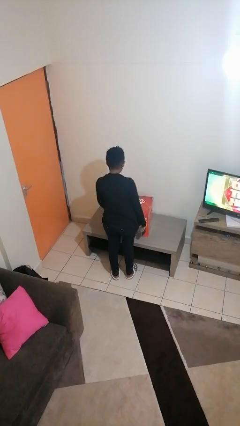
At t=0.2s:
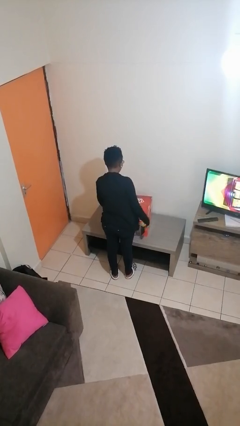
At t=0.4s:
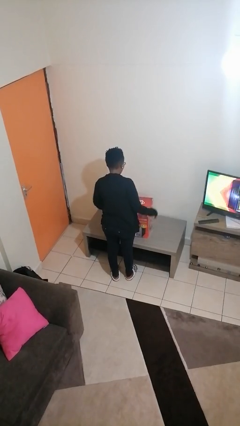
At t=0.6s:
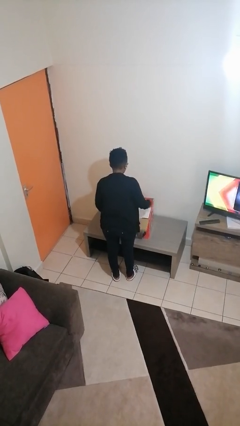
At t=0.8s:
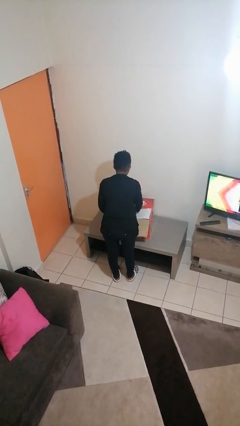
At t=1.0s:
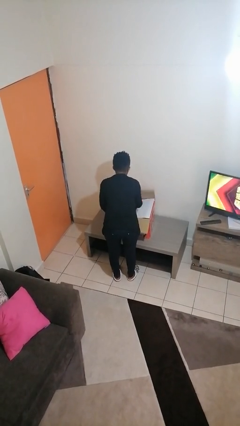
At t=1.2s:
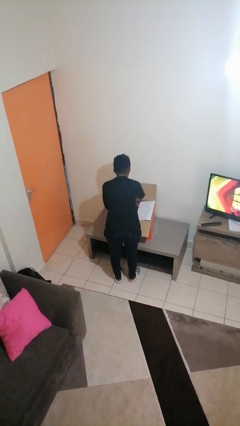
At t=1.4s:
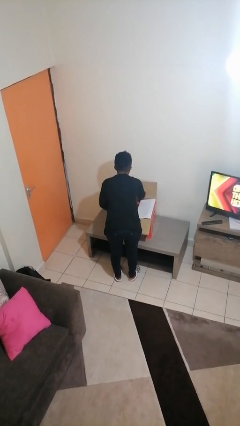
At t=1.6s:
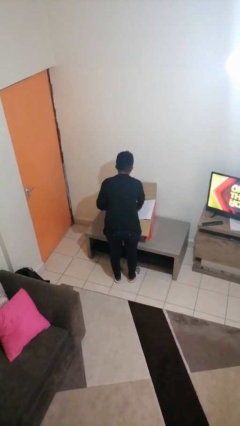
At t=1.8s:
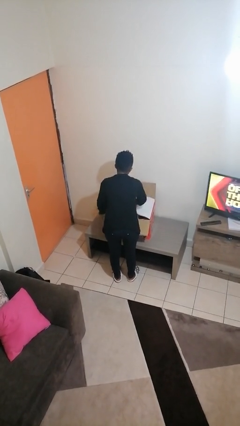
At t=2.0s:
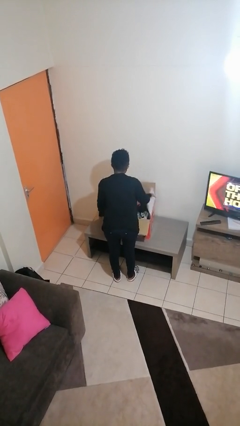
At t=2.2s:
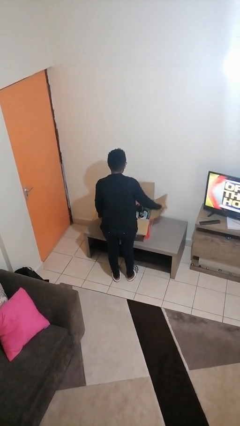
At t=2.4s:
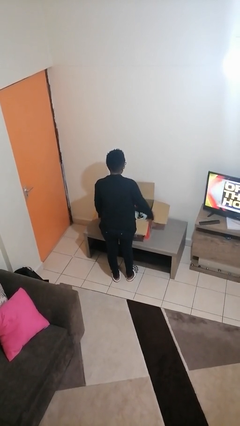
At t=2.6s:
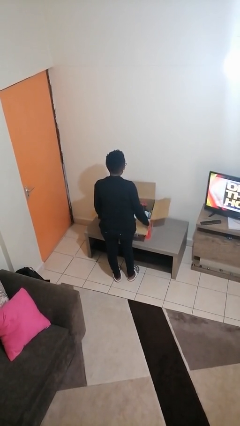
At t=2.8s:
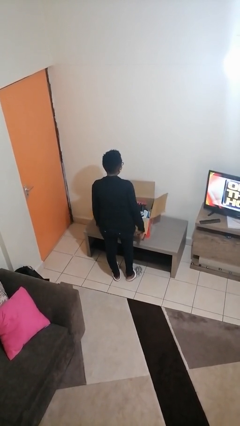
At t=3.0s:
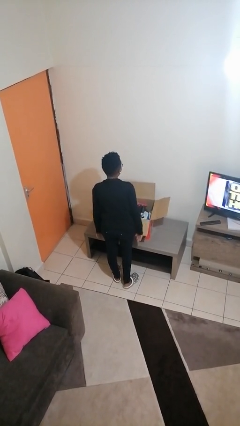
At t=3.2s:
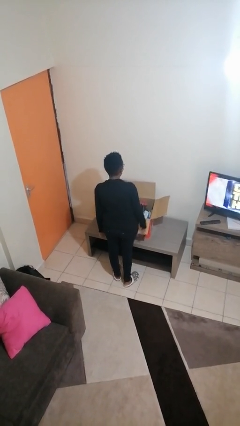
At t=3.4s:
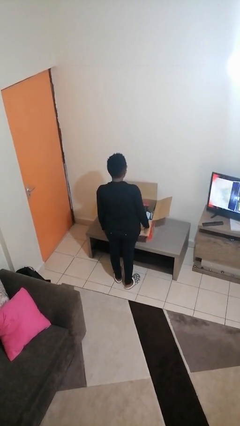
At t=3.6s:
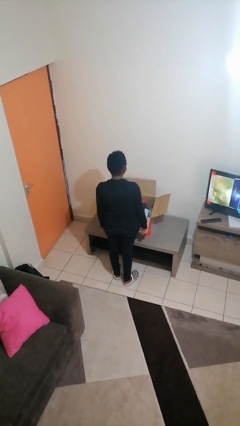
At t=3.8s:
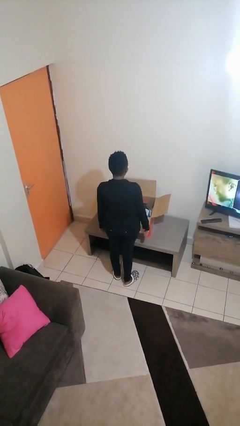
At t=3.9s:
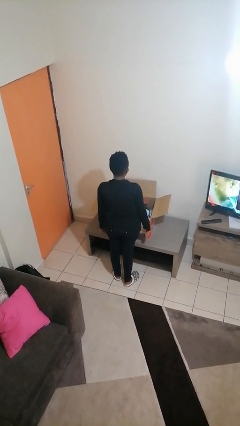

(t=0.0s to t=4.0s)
person opens box

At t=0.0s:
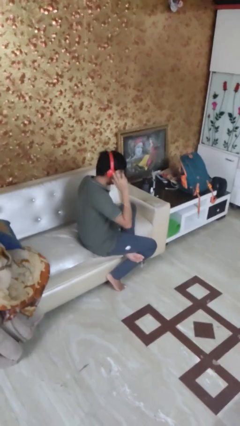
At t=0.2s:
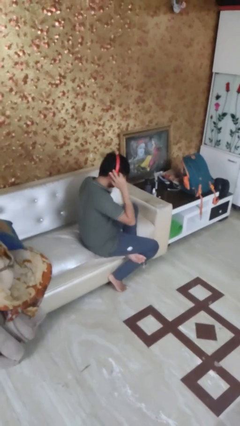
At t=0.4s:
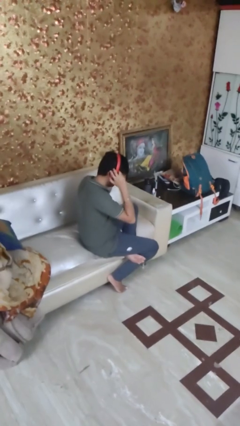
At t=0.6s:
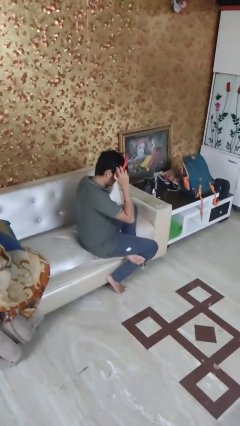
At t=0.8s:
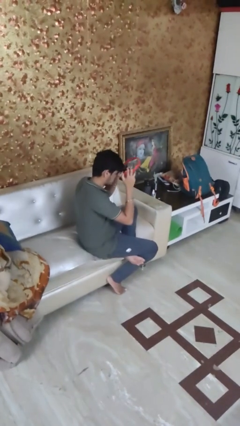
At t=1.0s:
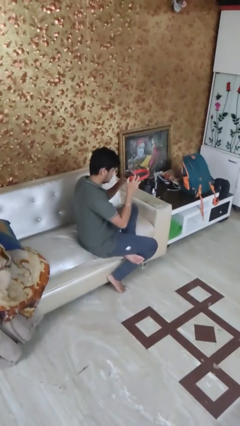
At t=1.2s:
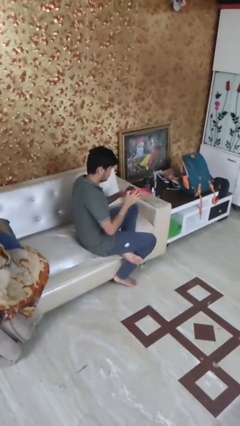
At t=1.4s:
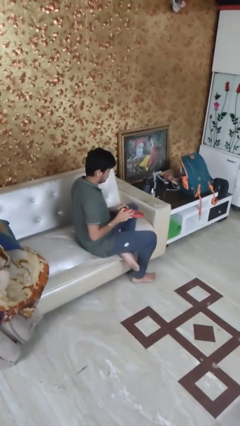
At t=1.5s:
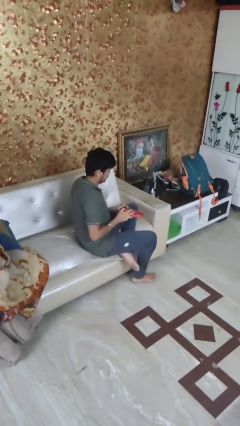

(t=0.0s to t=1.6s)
person takes off headphones

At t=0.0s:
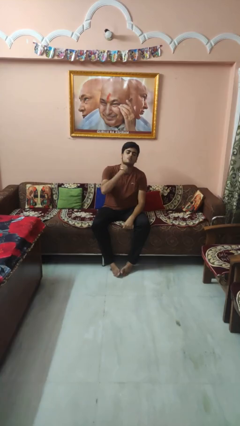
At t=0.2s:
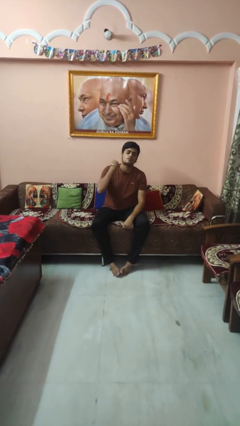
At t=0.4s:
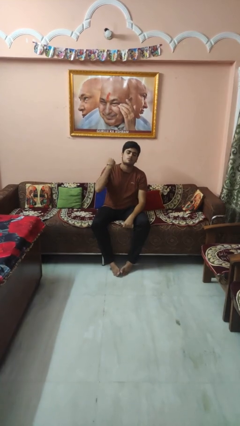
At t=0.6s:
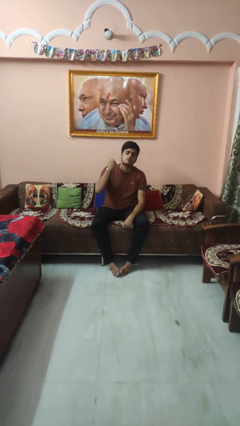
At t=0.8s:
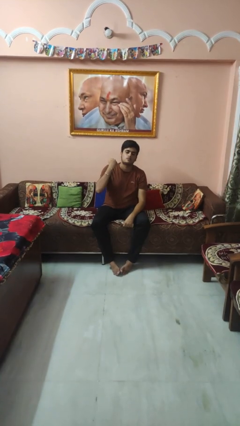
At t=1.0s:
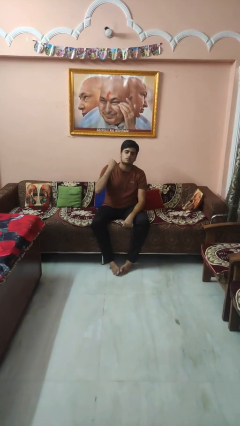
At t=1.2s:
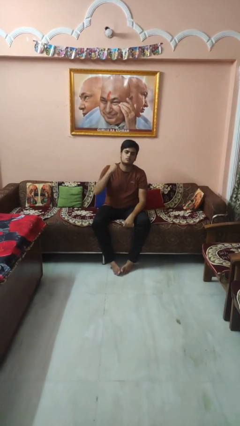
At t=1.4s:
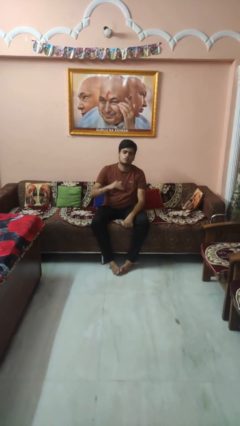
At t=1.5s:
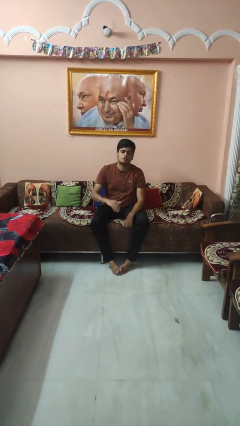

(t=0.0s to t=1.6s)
person gestures cut

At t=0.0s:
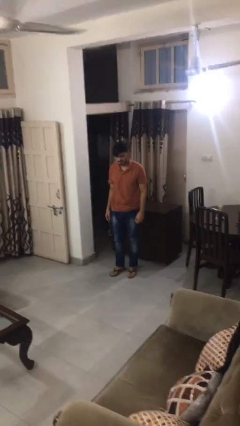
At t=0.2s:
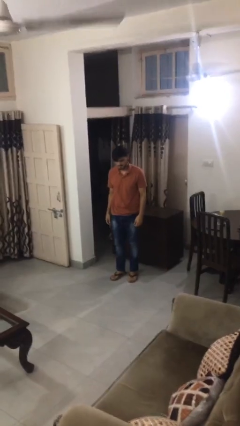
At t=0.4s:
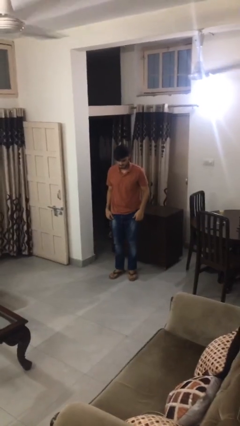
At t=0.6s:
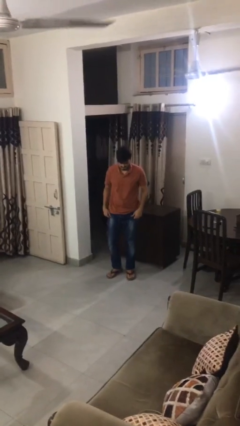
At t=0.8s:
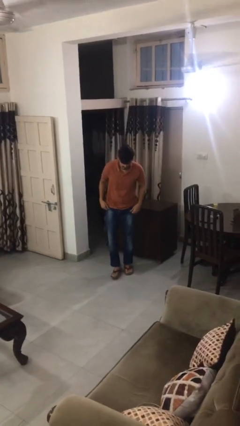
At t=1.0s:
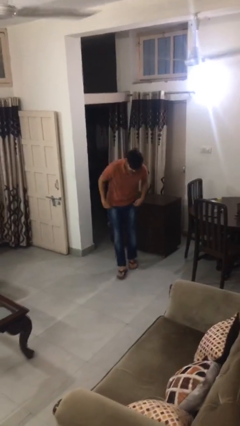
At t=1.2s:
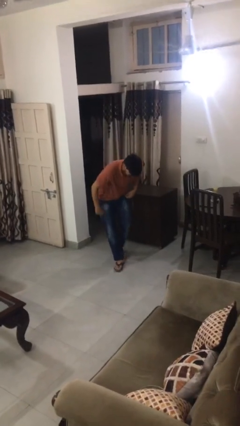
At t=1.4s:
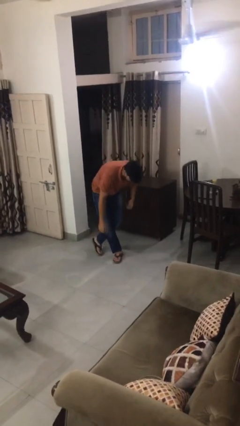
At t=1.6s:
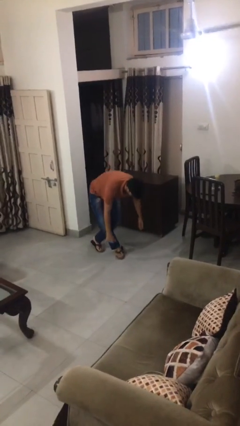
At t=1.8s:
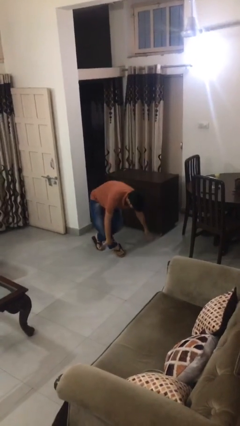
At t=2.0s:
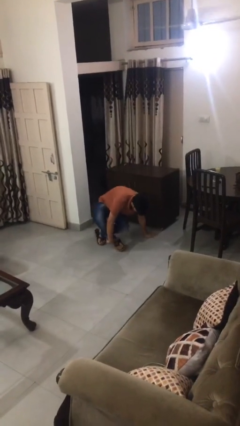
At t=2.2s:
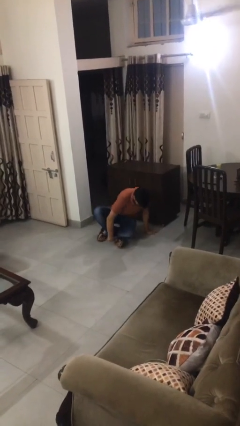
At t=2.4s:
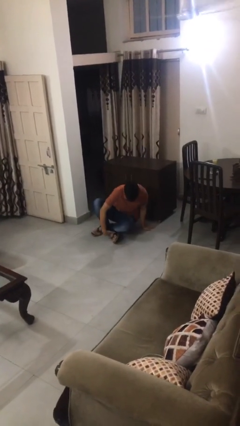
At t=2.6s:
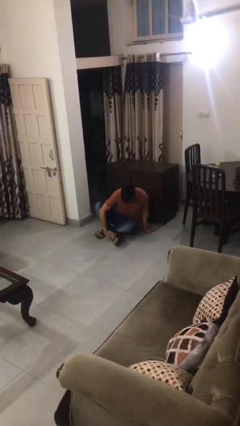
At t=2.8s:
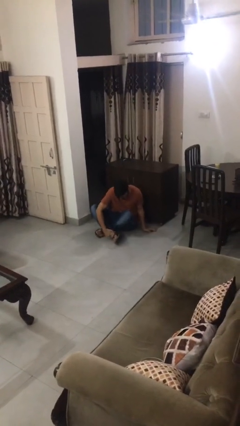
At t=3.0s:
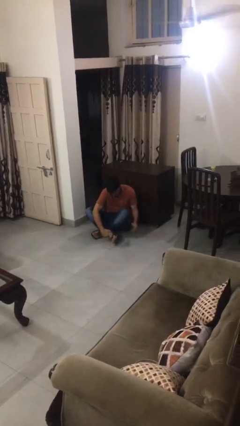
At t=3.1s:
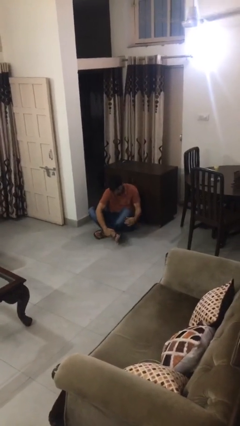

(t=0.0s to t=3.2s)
person sits crisscross

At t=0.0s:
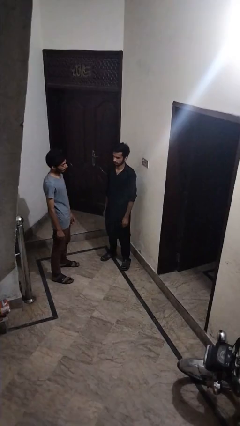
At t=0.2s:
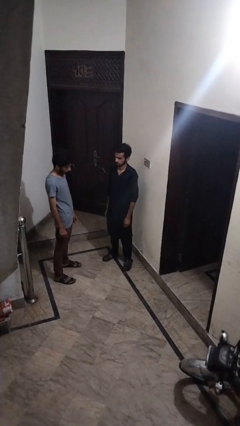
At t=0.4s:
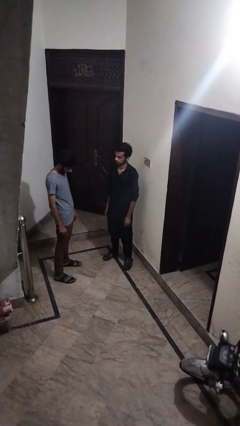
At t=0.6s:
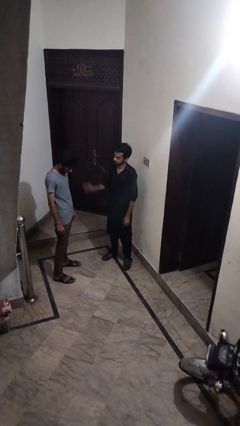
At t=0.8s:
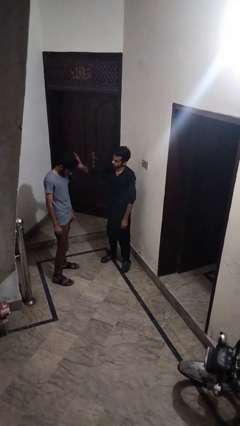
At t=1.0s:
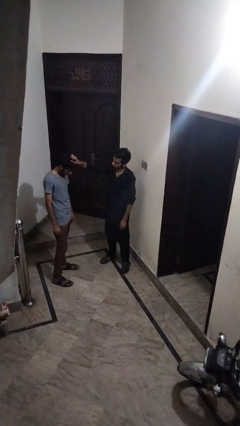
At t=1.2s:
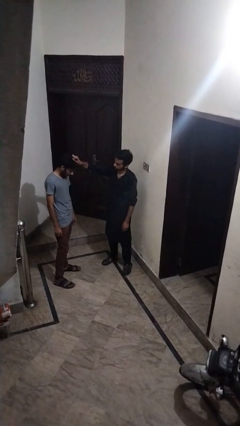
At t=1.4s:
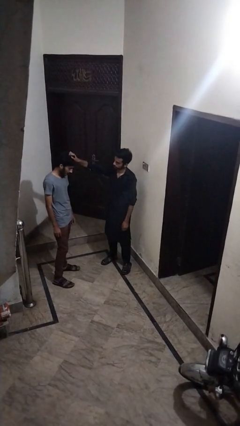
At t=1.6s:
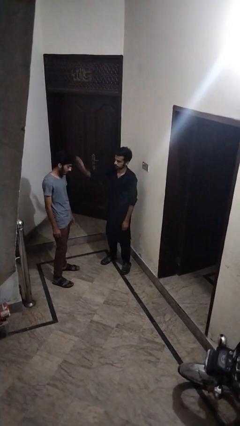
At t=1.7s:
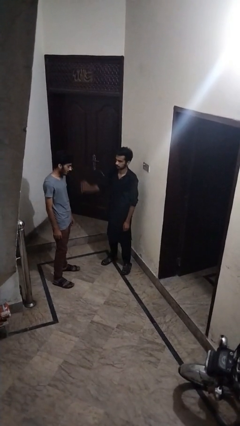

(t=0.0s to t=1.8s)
person grabs person by hair

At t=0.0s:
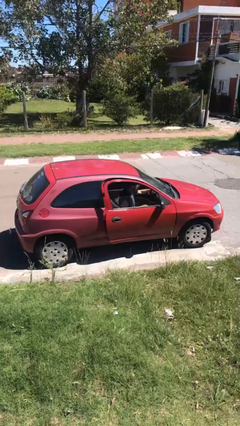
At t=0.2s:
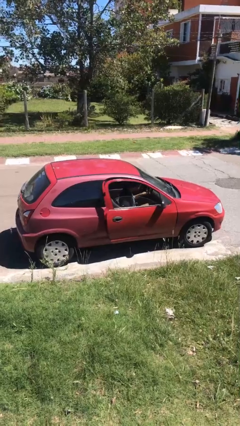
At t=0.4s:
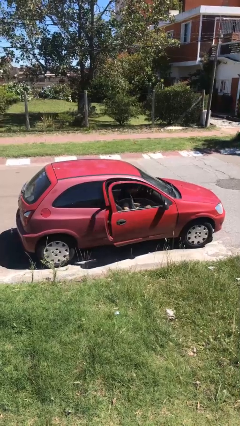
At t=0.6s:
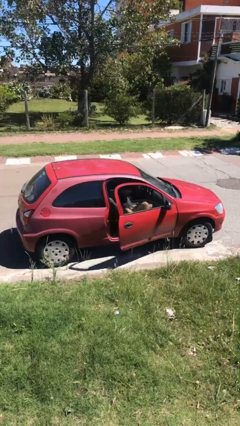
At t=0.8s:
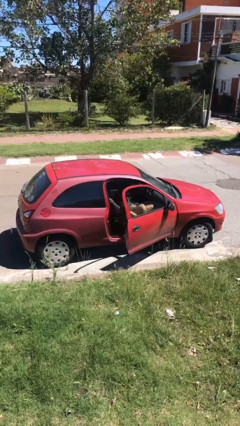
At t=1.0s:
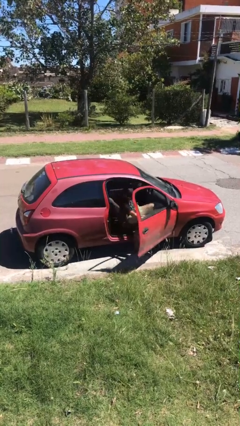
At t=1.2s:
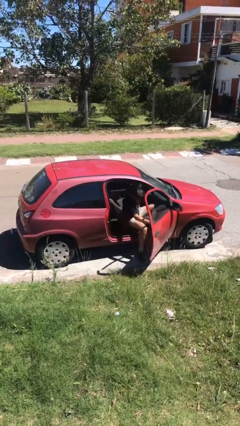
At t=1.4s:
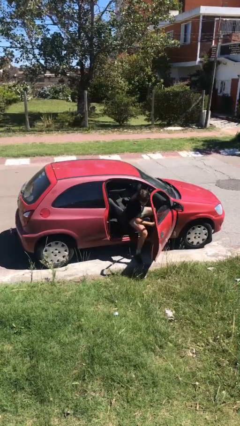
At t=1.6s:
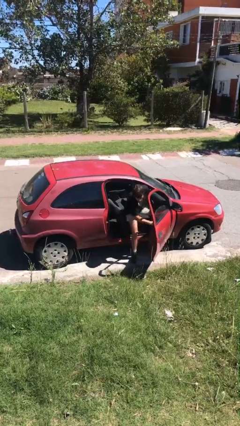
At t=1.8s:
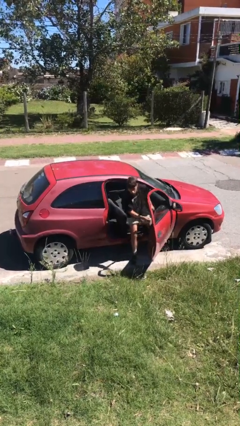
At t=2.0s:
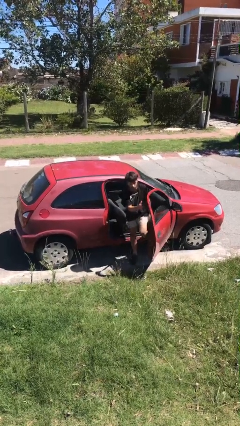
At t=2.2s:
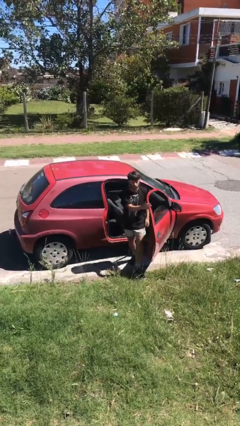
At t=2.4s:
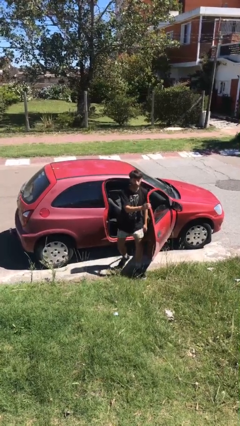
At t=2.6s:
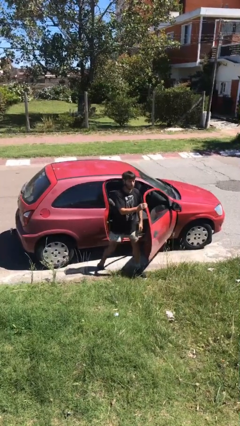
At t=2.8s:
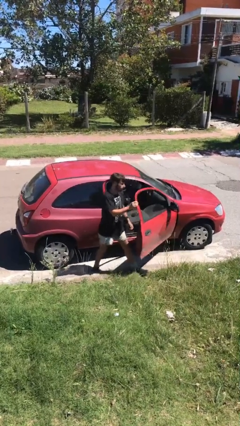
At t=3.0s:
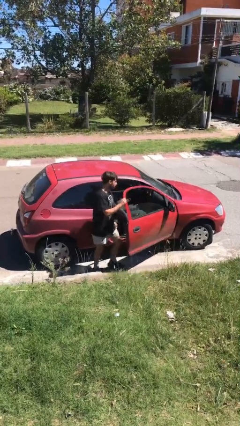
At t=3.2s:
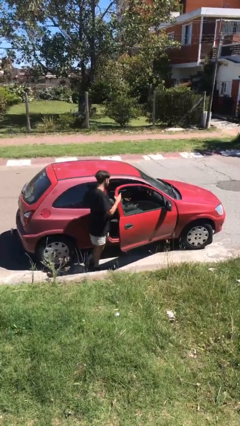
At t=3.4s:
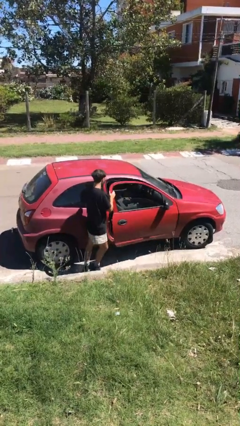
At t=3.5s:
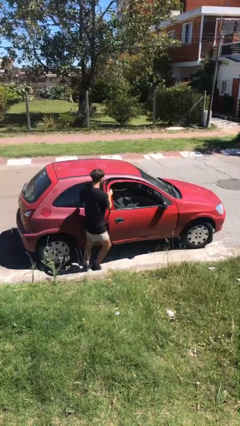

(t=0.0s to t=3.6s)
car drops off person

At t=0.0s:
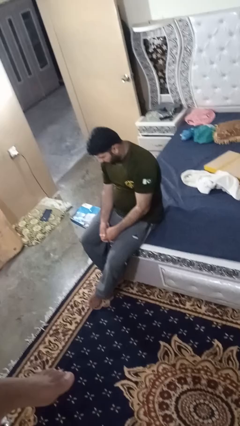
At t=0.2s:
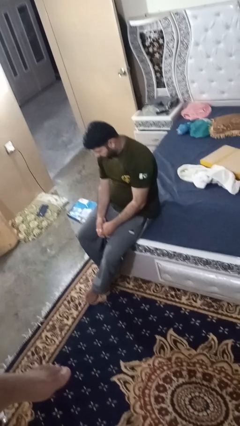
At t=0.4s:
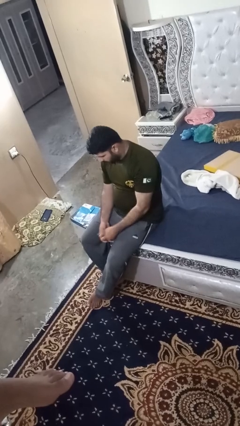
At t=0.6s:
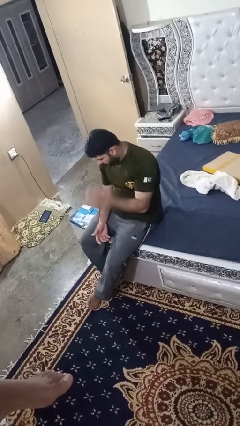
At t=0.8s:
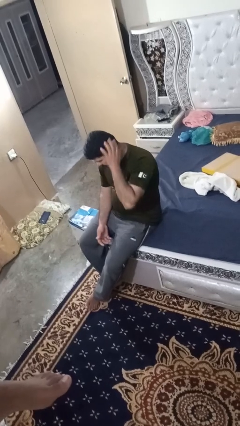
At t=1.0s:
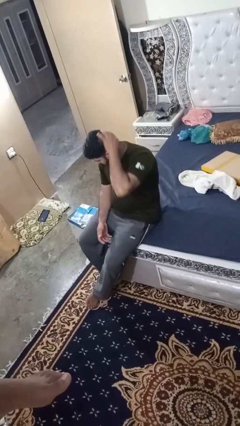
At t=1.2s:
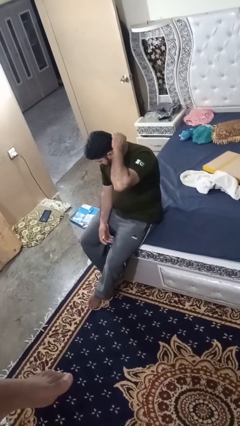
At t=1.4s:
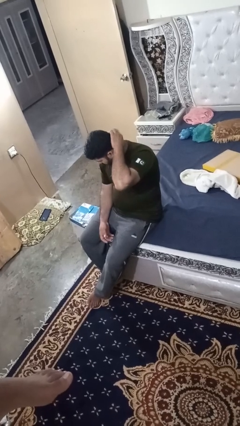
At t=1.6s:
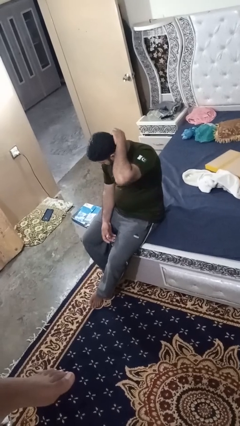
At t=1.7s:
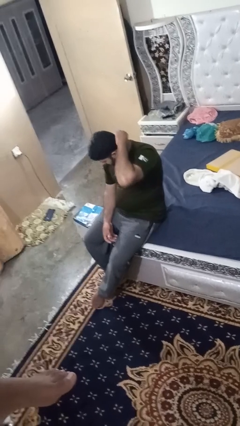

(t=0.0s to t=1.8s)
person strokes hair
